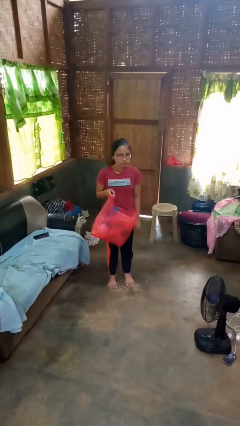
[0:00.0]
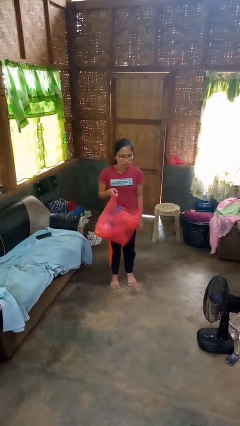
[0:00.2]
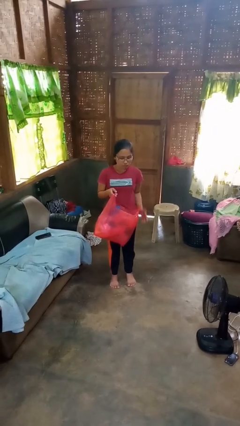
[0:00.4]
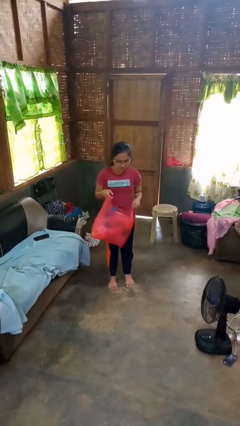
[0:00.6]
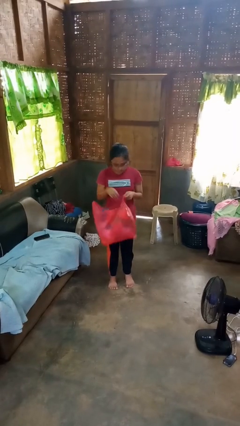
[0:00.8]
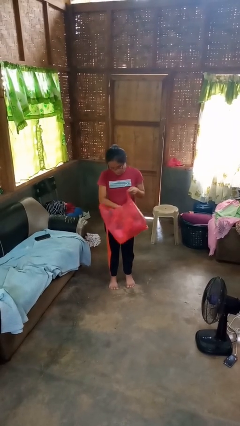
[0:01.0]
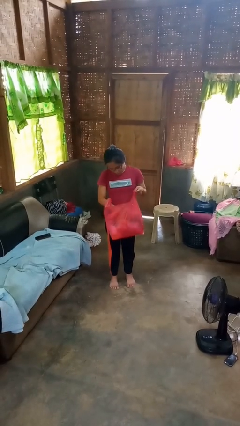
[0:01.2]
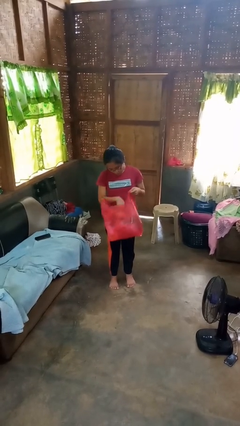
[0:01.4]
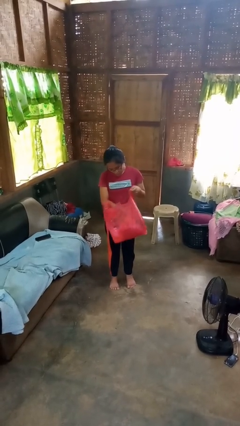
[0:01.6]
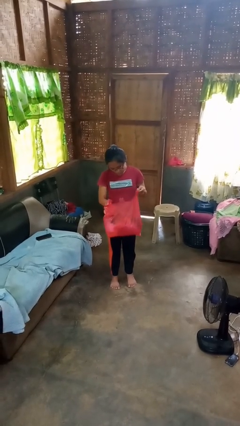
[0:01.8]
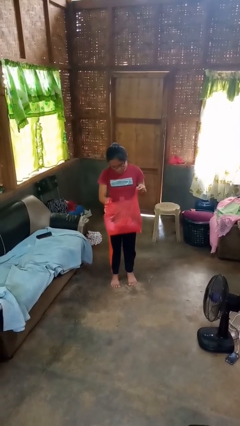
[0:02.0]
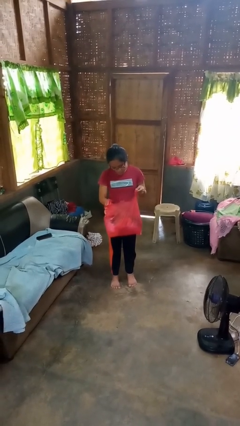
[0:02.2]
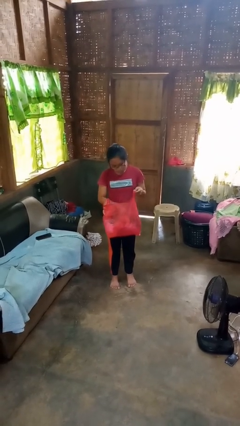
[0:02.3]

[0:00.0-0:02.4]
person searches in bag

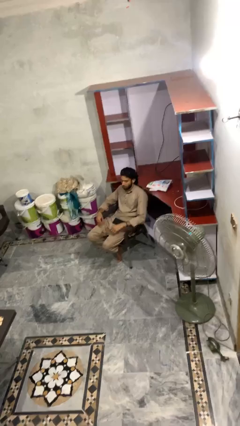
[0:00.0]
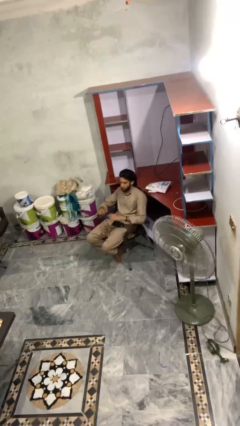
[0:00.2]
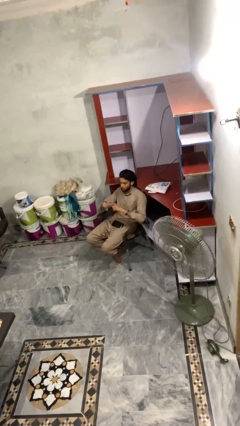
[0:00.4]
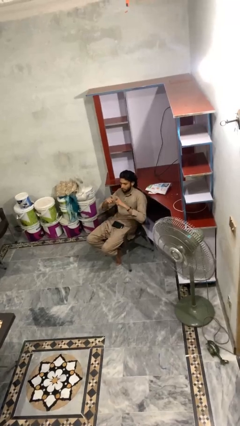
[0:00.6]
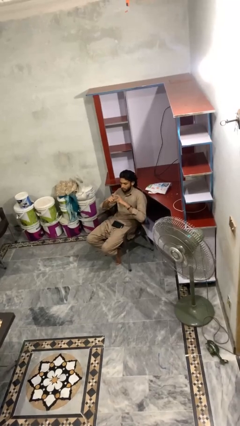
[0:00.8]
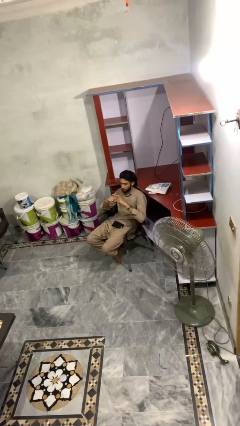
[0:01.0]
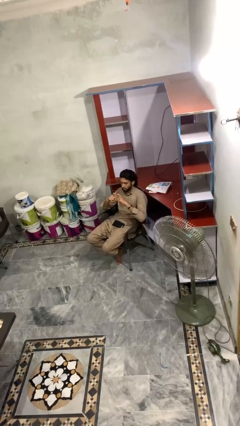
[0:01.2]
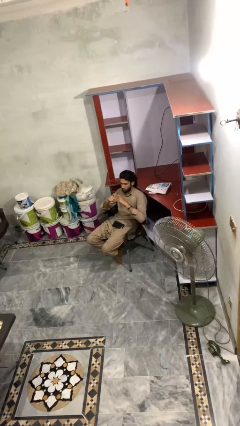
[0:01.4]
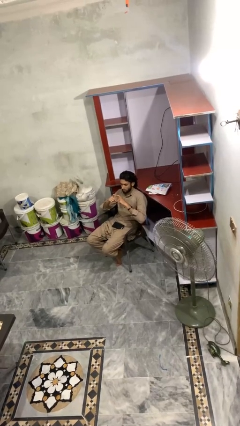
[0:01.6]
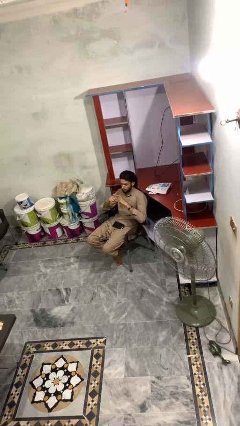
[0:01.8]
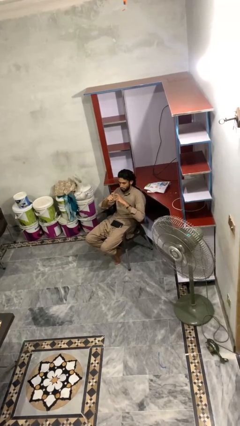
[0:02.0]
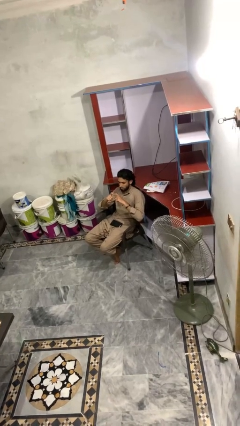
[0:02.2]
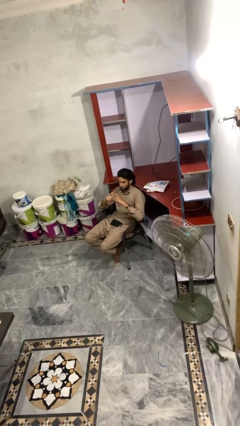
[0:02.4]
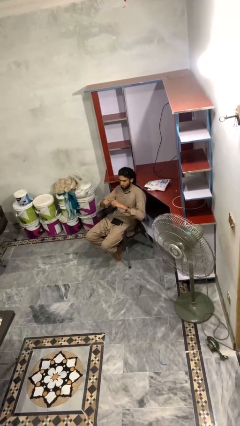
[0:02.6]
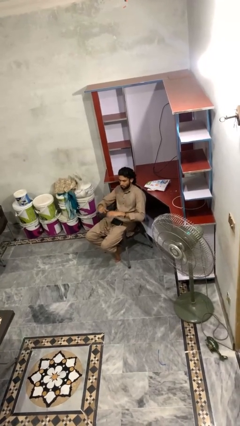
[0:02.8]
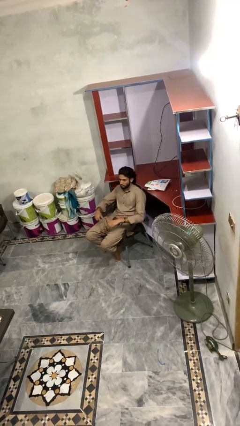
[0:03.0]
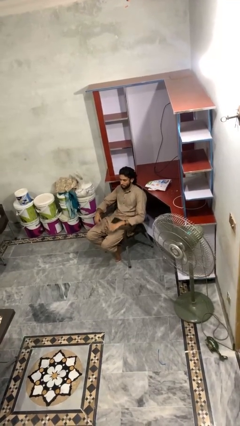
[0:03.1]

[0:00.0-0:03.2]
person gestures heart

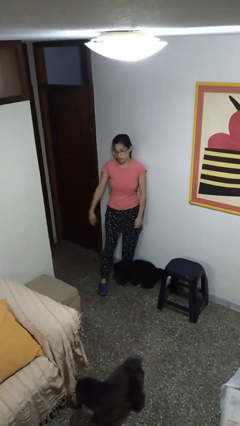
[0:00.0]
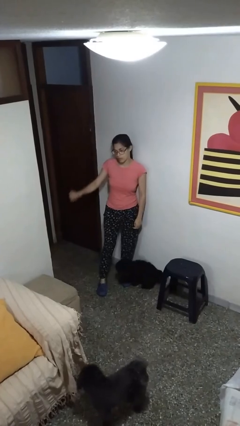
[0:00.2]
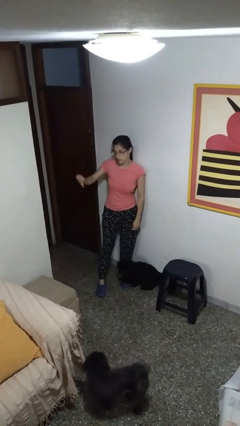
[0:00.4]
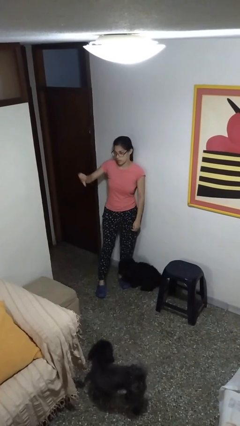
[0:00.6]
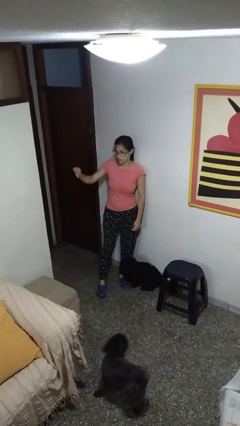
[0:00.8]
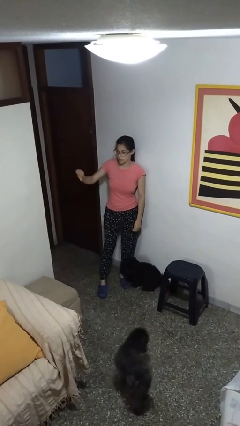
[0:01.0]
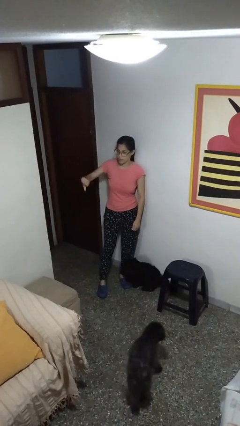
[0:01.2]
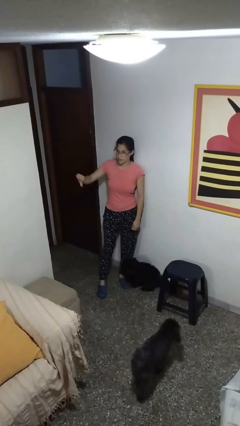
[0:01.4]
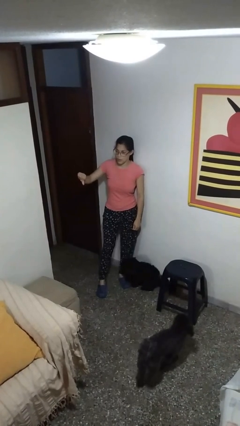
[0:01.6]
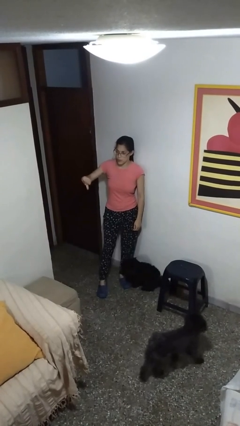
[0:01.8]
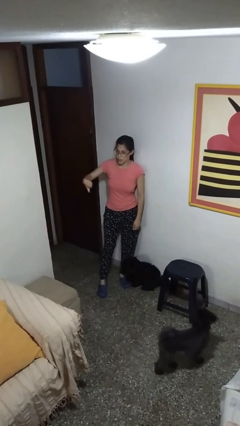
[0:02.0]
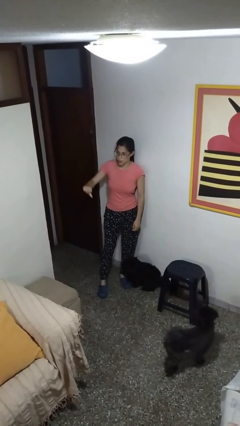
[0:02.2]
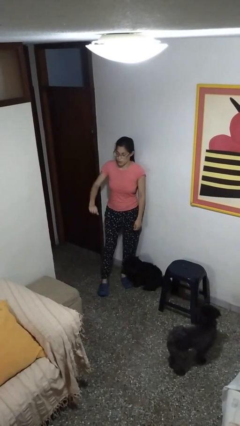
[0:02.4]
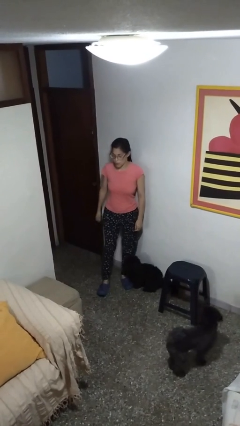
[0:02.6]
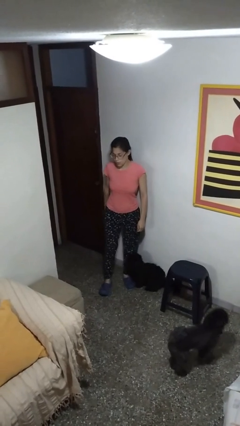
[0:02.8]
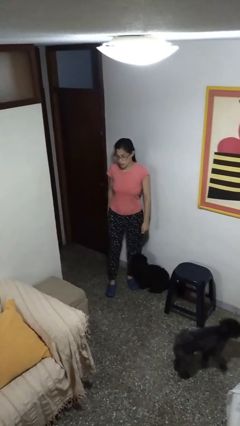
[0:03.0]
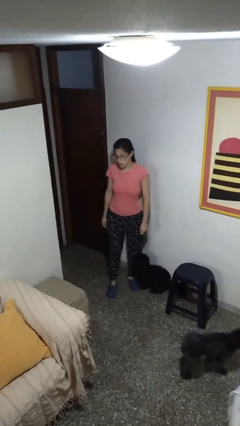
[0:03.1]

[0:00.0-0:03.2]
person gestures thumbs down

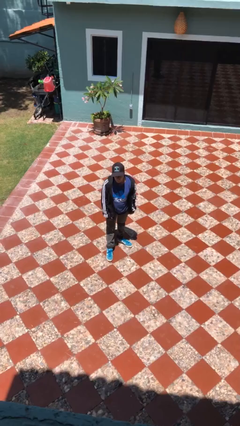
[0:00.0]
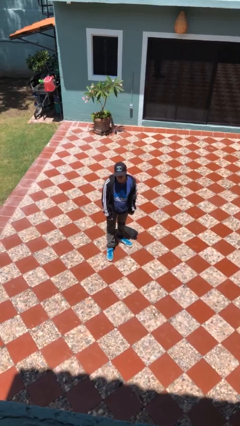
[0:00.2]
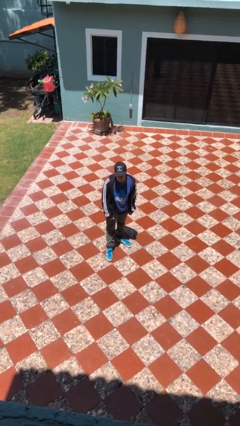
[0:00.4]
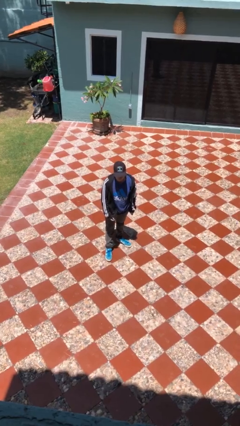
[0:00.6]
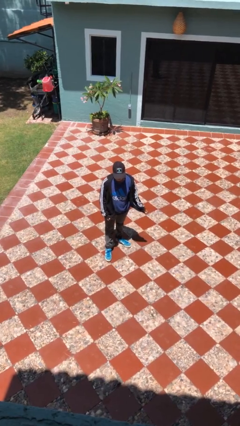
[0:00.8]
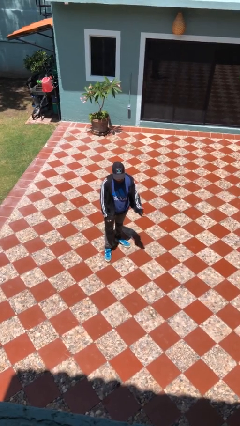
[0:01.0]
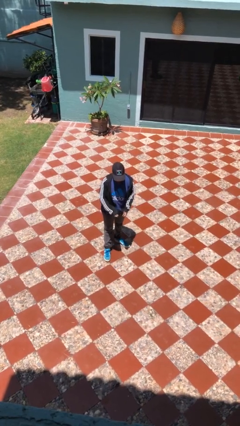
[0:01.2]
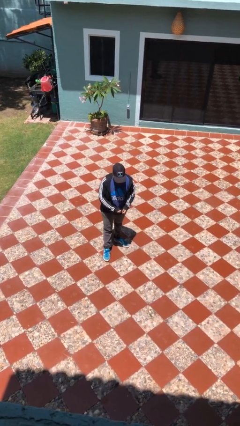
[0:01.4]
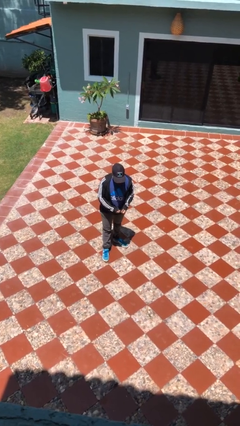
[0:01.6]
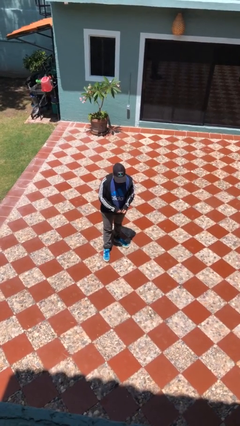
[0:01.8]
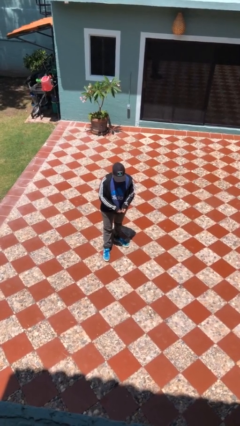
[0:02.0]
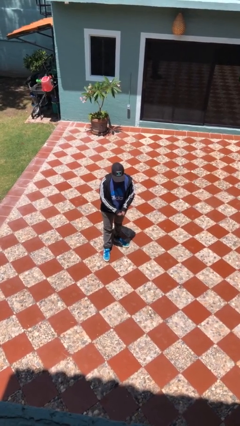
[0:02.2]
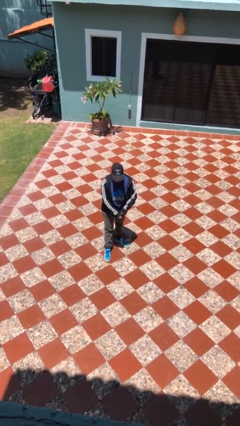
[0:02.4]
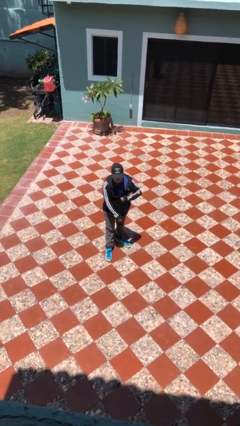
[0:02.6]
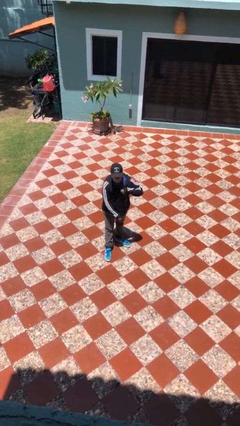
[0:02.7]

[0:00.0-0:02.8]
person zips up jacket

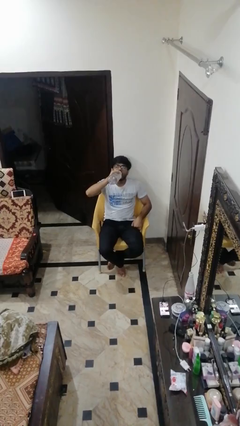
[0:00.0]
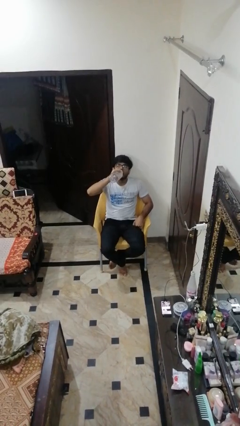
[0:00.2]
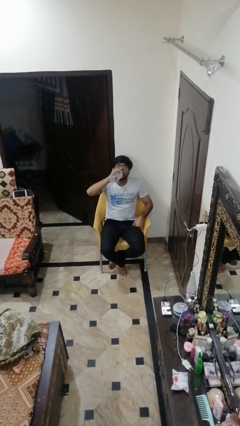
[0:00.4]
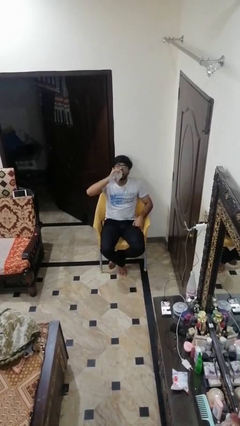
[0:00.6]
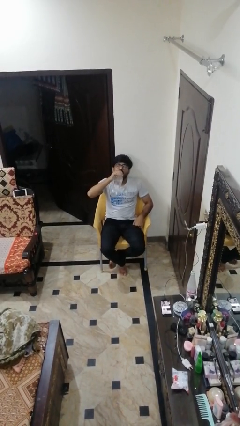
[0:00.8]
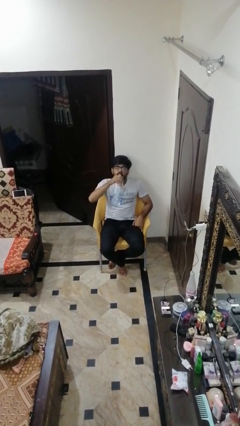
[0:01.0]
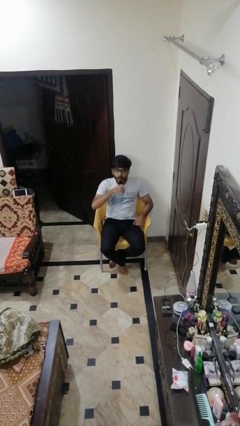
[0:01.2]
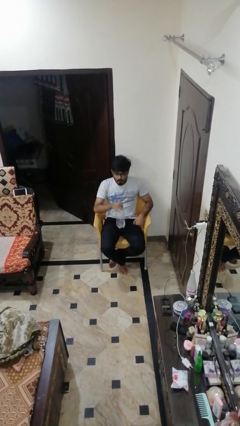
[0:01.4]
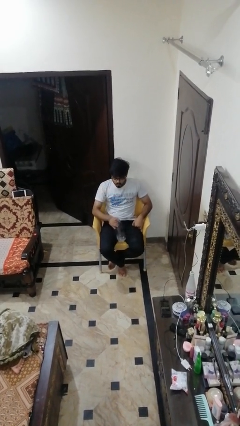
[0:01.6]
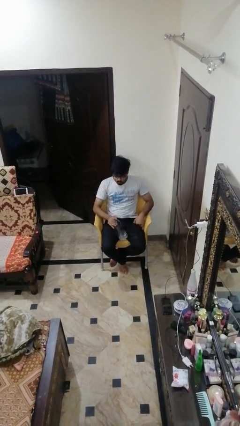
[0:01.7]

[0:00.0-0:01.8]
person picks up object from floor

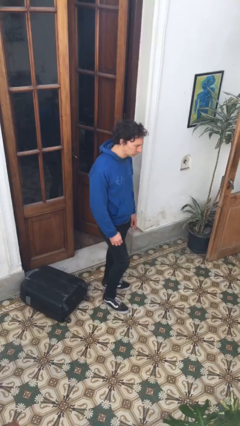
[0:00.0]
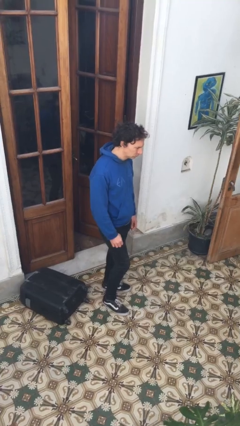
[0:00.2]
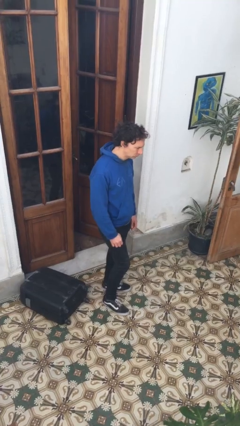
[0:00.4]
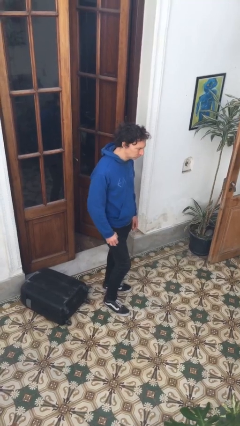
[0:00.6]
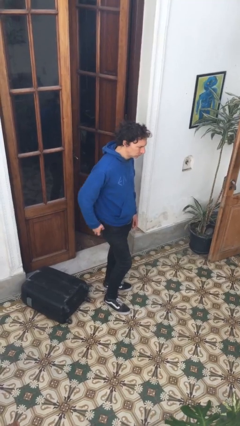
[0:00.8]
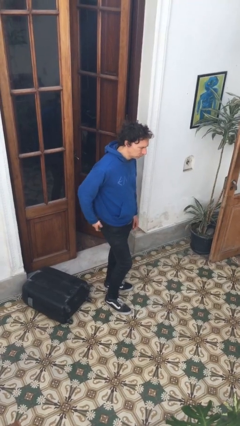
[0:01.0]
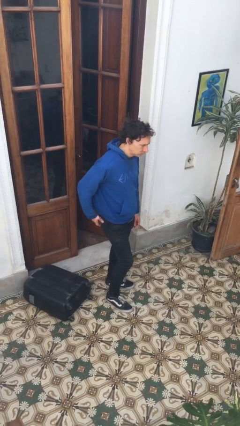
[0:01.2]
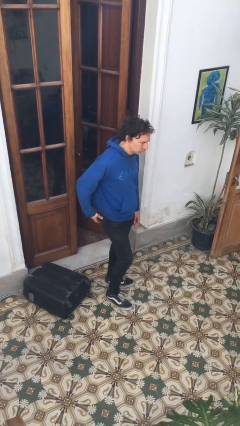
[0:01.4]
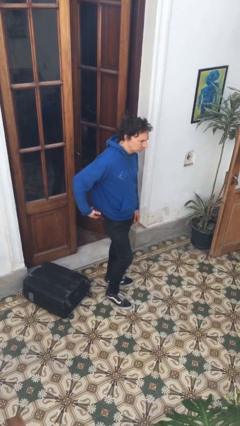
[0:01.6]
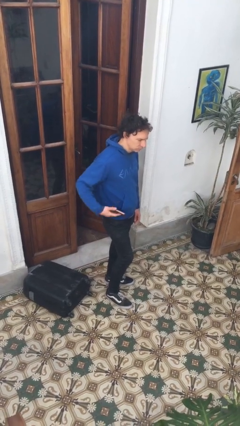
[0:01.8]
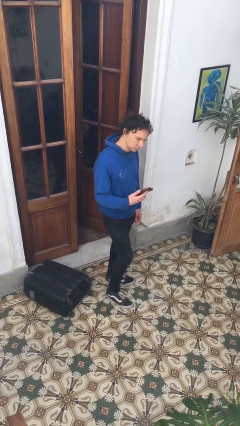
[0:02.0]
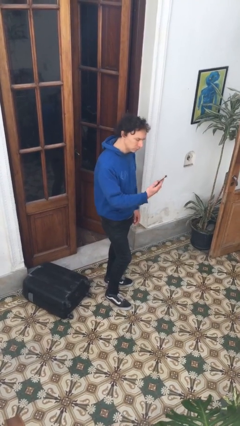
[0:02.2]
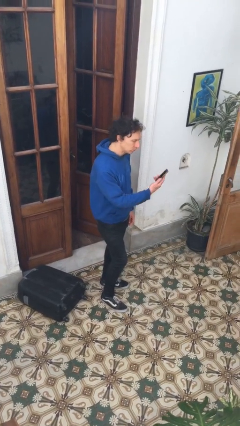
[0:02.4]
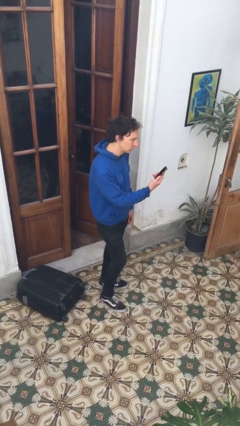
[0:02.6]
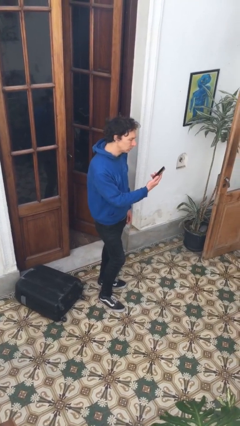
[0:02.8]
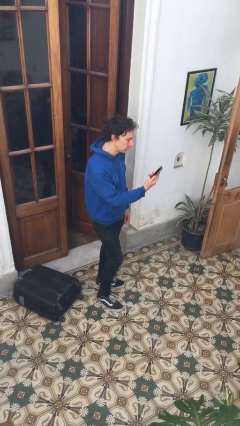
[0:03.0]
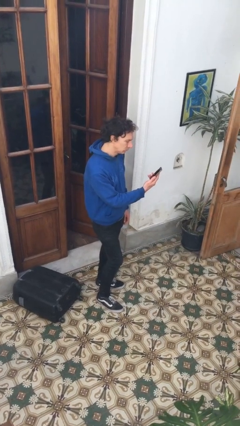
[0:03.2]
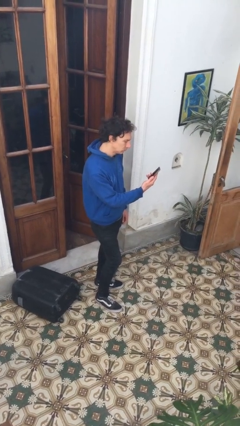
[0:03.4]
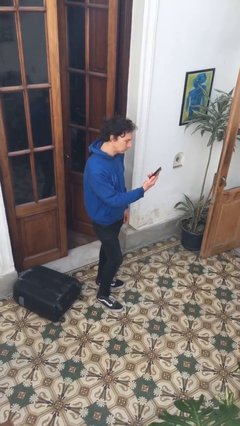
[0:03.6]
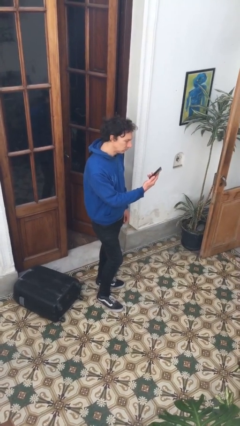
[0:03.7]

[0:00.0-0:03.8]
person takes phone from pocket

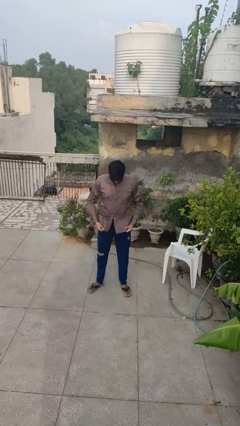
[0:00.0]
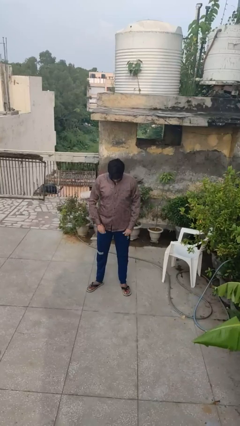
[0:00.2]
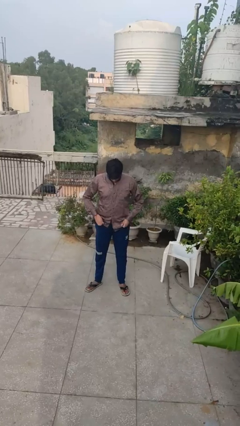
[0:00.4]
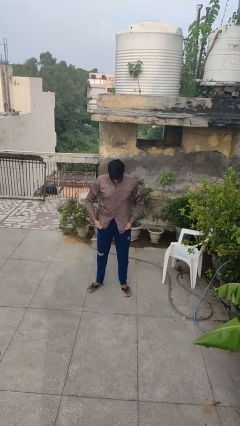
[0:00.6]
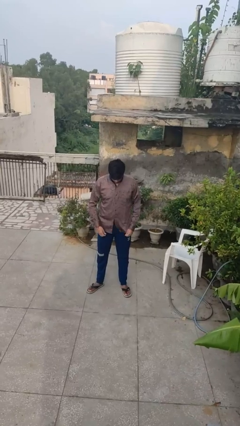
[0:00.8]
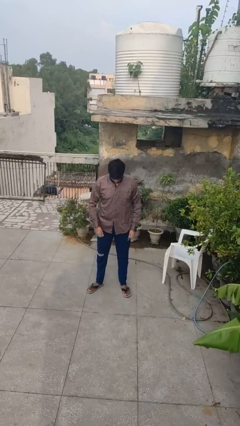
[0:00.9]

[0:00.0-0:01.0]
person untucks shirt
